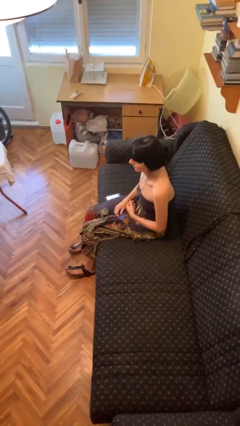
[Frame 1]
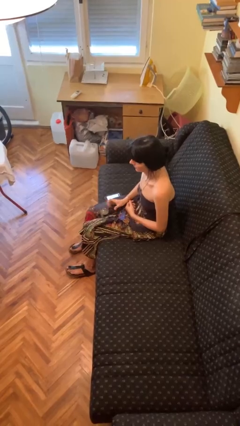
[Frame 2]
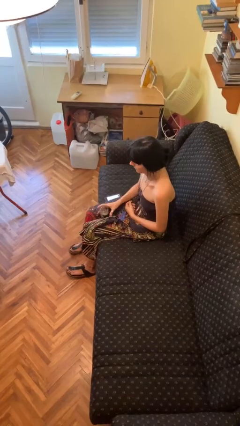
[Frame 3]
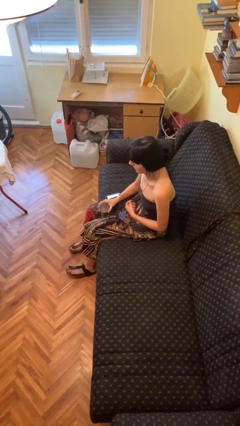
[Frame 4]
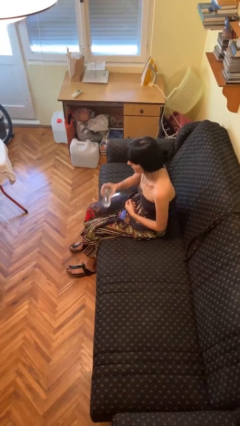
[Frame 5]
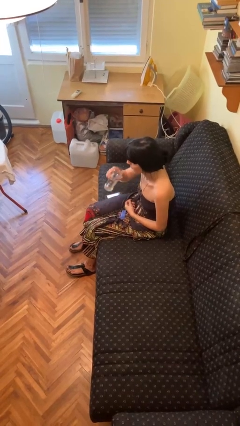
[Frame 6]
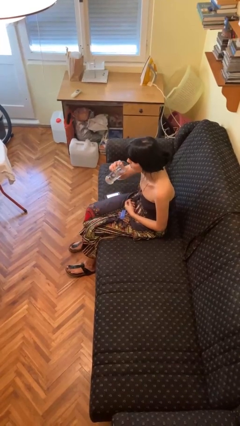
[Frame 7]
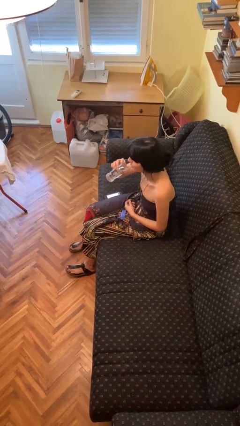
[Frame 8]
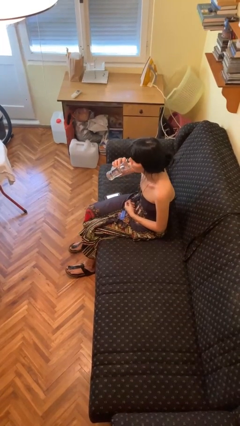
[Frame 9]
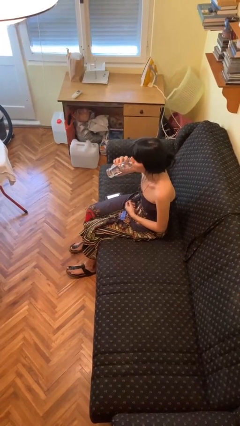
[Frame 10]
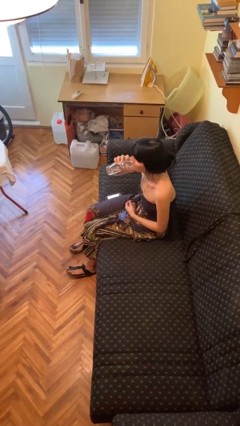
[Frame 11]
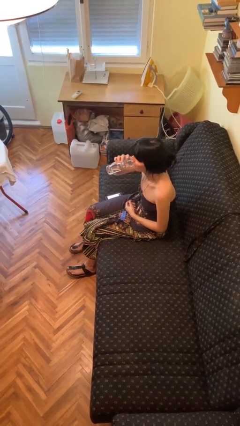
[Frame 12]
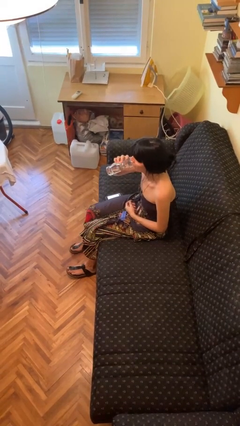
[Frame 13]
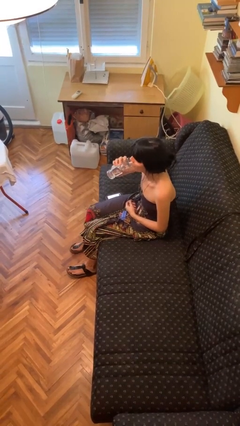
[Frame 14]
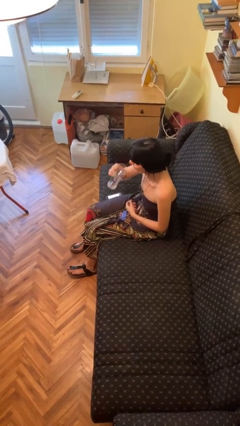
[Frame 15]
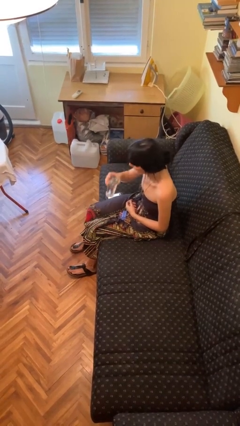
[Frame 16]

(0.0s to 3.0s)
person drinks from cup

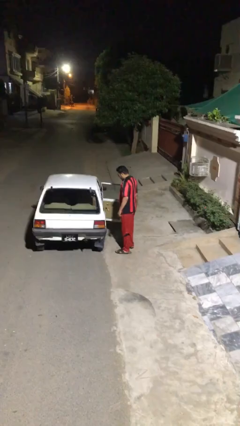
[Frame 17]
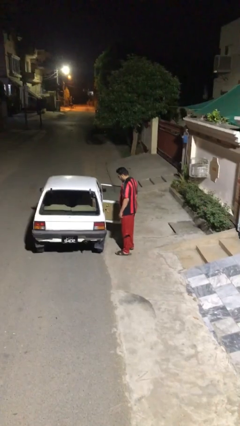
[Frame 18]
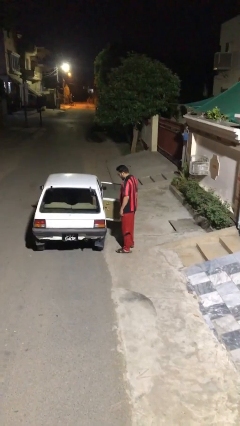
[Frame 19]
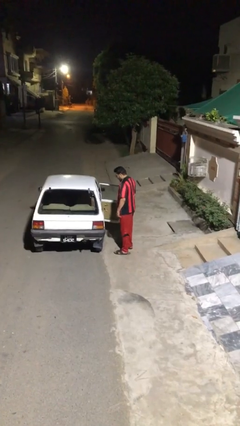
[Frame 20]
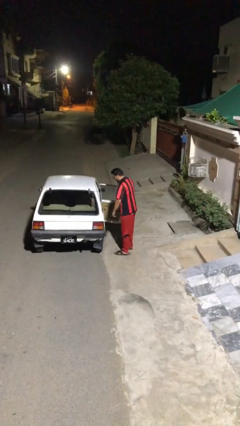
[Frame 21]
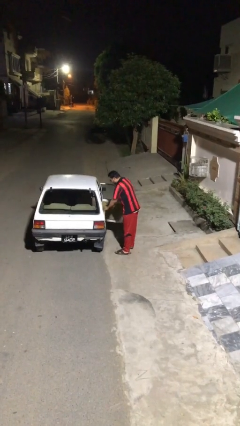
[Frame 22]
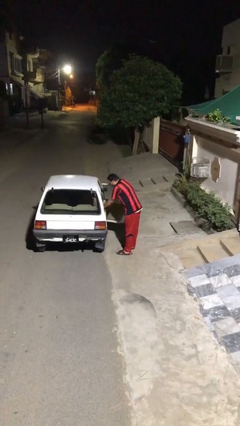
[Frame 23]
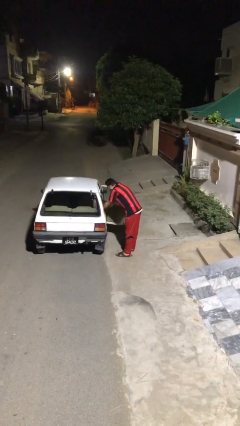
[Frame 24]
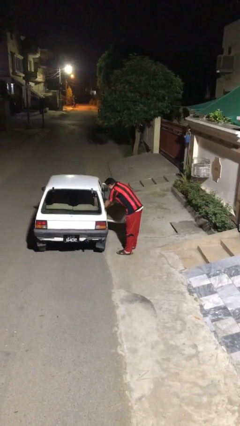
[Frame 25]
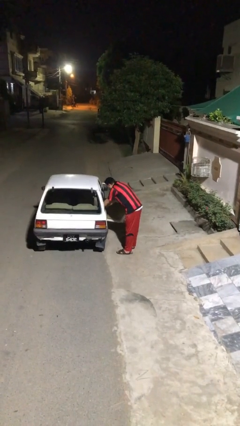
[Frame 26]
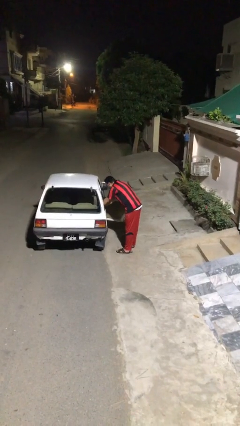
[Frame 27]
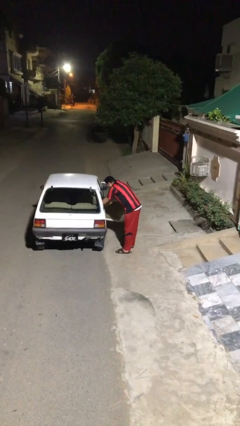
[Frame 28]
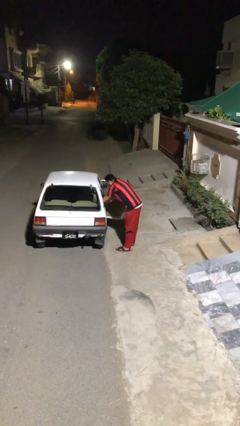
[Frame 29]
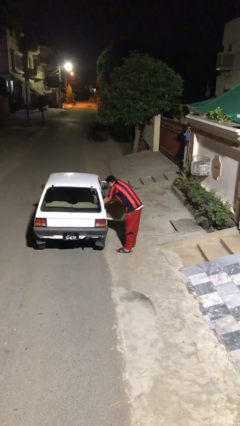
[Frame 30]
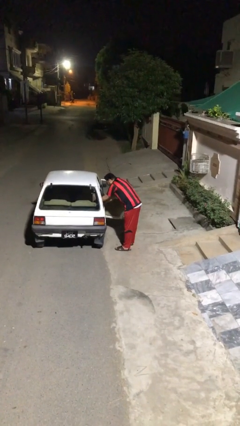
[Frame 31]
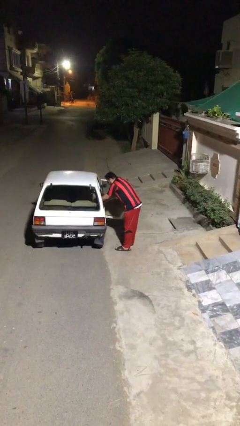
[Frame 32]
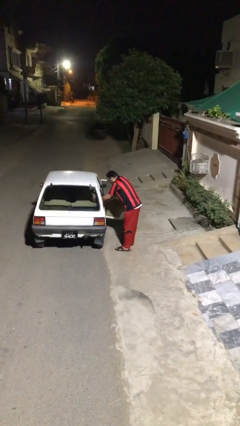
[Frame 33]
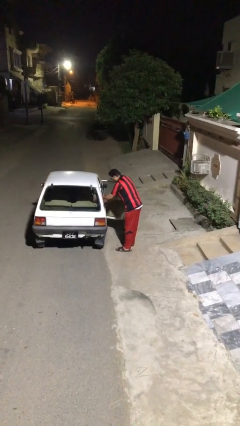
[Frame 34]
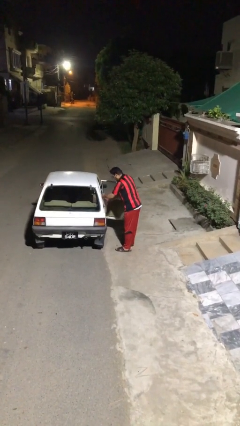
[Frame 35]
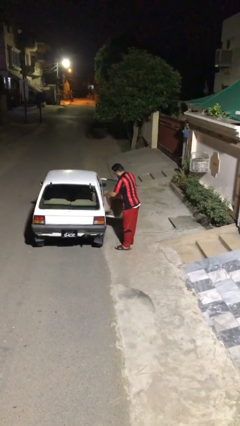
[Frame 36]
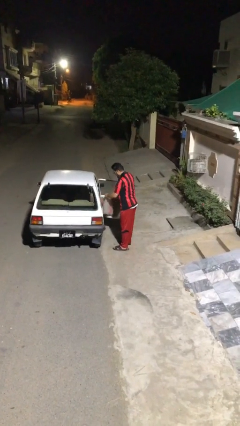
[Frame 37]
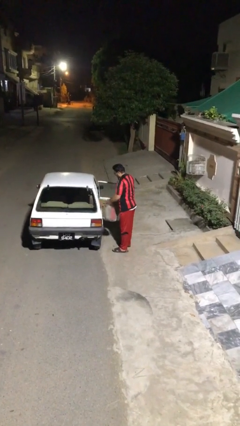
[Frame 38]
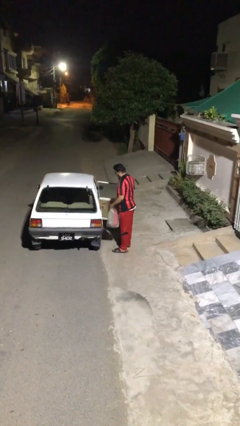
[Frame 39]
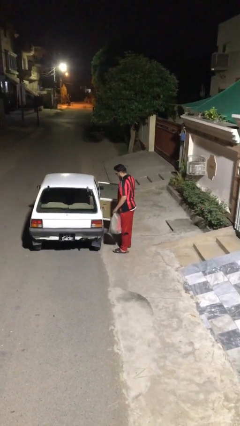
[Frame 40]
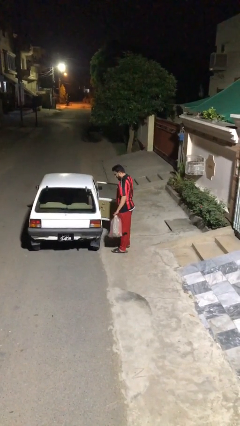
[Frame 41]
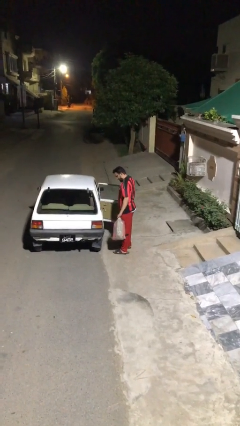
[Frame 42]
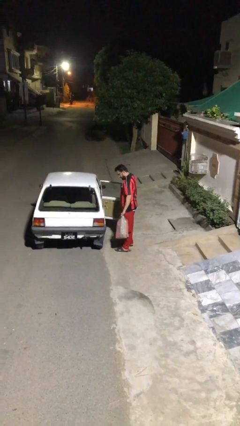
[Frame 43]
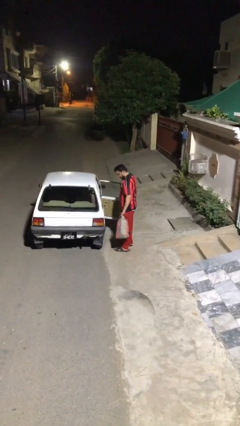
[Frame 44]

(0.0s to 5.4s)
person unloads car

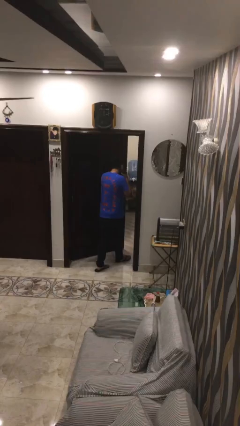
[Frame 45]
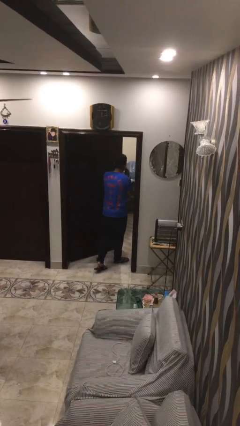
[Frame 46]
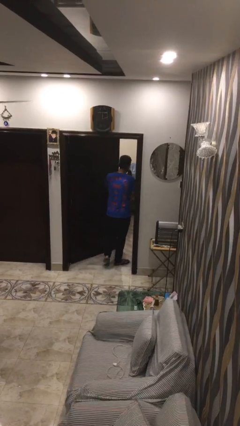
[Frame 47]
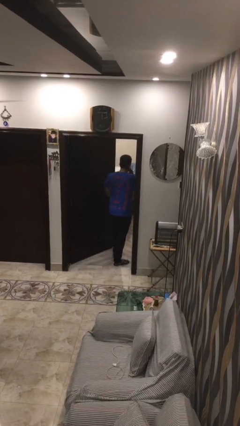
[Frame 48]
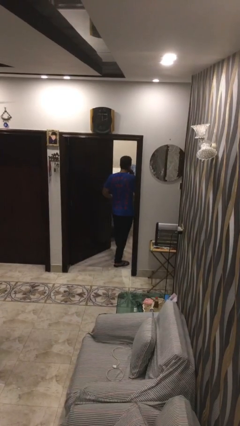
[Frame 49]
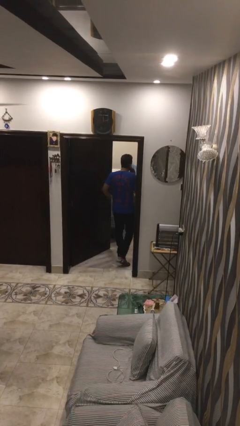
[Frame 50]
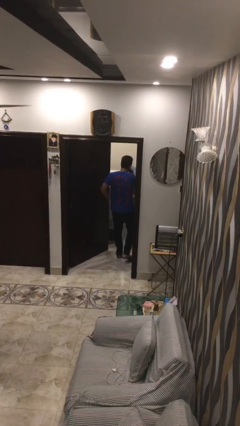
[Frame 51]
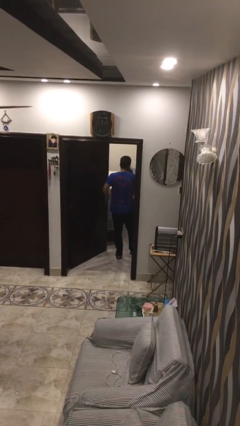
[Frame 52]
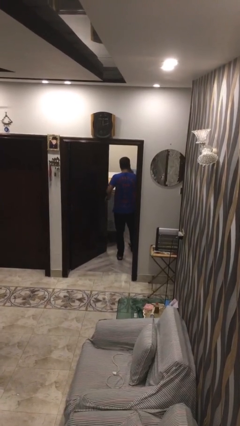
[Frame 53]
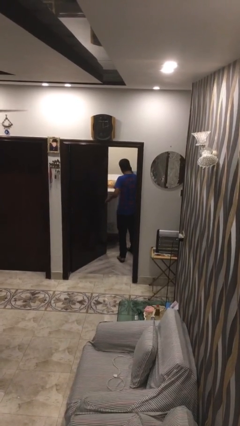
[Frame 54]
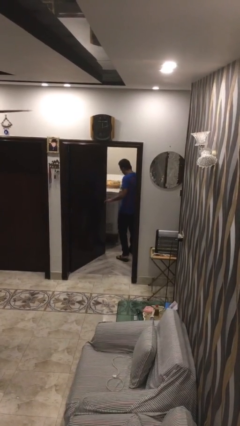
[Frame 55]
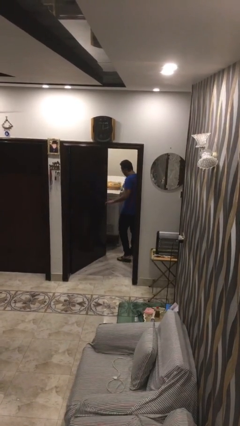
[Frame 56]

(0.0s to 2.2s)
person exits scene through structure

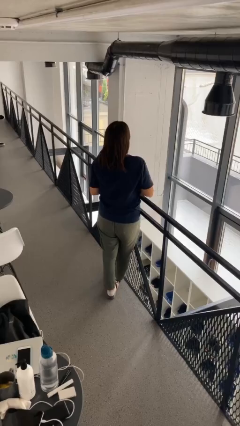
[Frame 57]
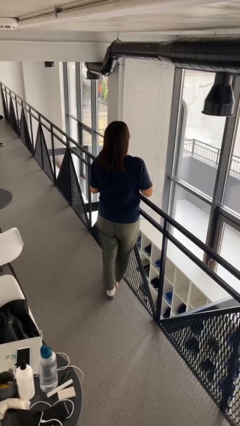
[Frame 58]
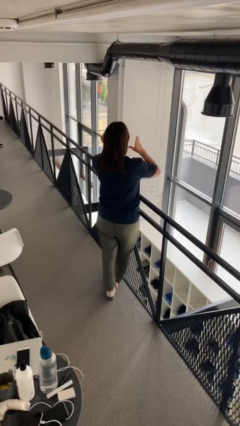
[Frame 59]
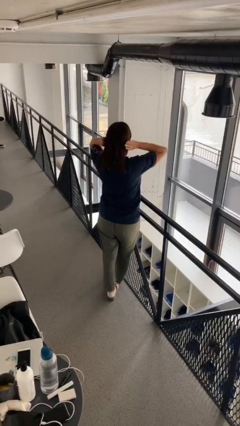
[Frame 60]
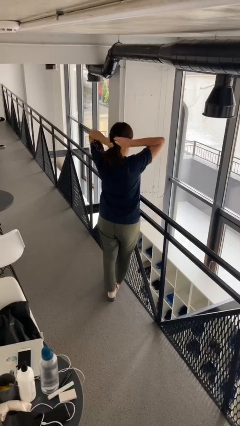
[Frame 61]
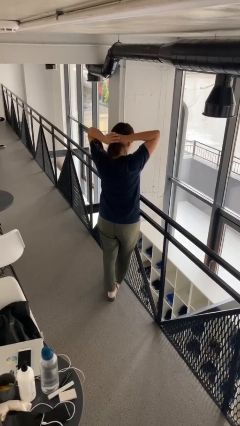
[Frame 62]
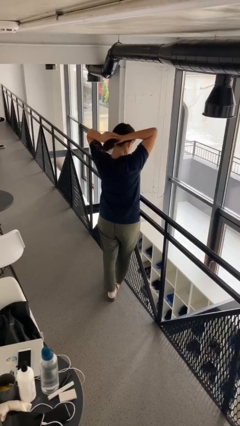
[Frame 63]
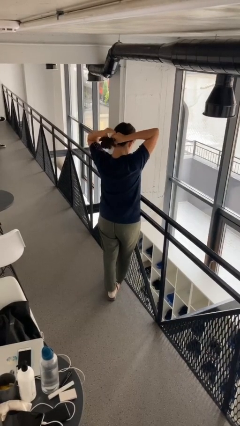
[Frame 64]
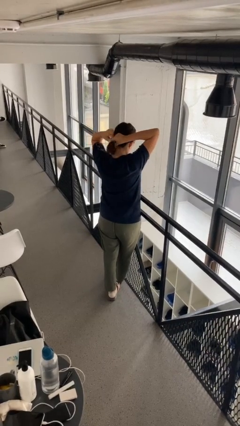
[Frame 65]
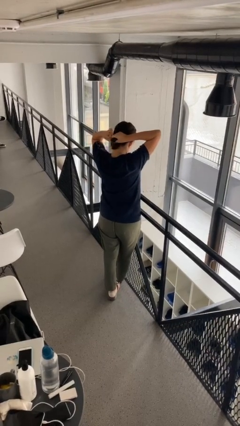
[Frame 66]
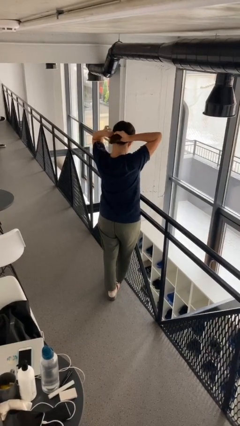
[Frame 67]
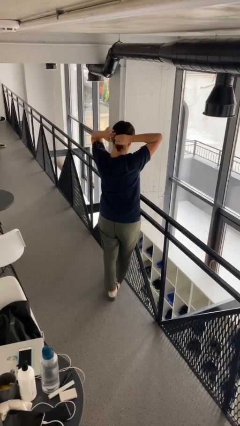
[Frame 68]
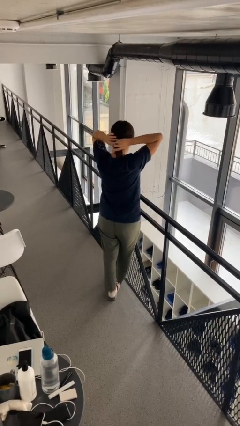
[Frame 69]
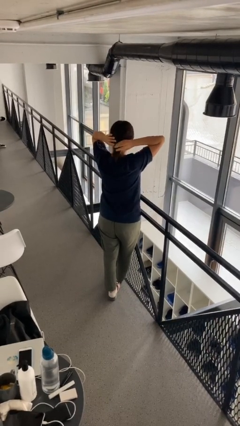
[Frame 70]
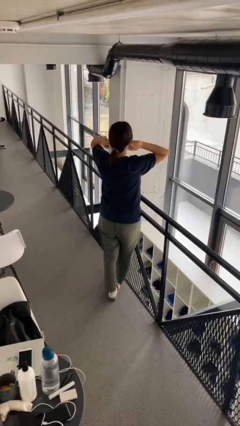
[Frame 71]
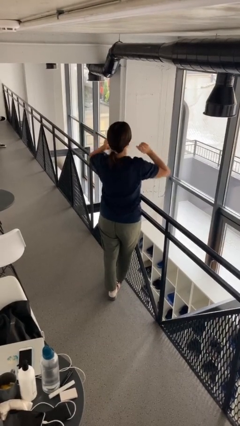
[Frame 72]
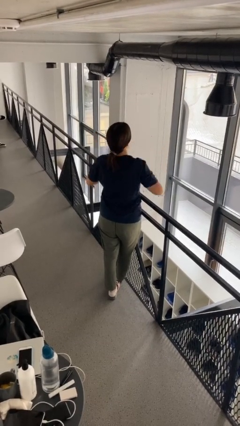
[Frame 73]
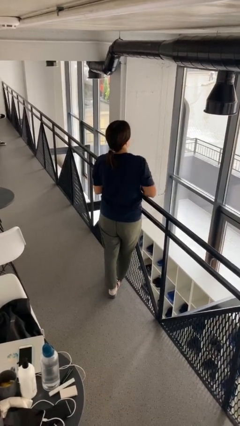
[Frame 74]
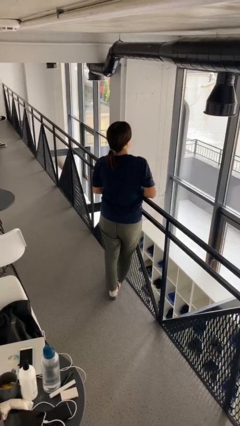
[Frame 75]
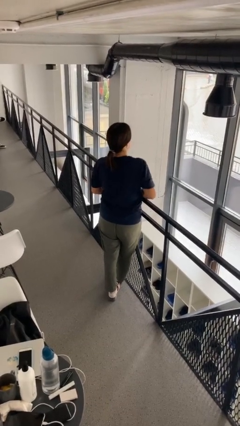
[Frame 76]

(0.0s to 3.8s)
person puts hair in ponytail

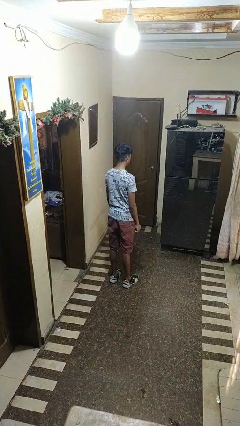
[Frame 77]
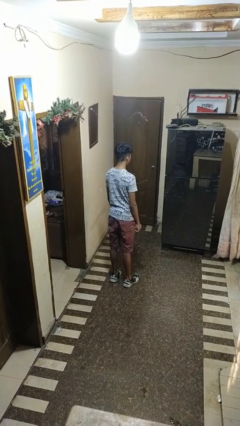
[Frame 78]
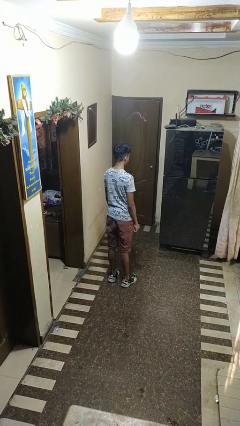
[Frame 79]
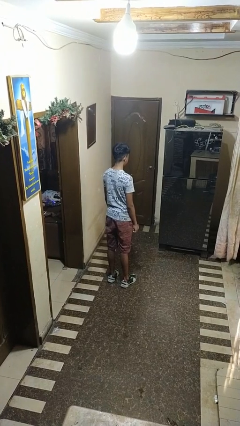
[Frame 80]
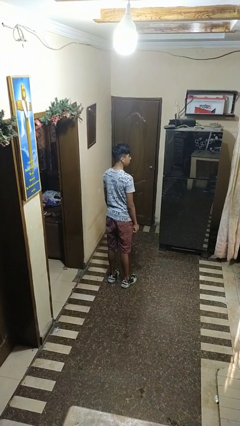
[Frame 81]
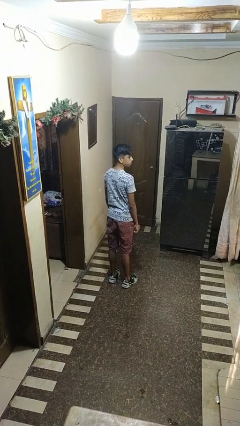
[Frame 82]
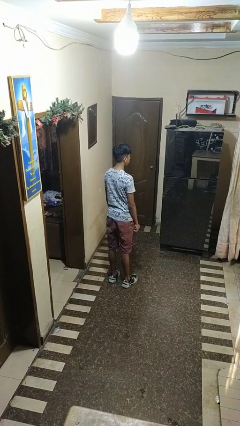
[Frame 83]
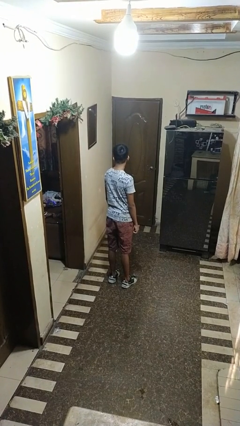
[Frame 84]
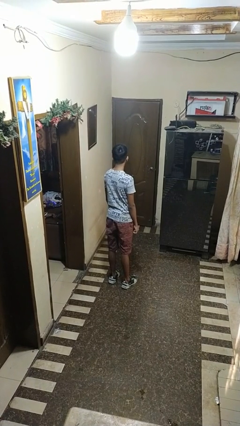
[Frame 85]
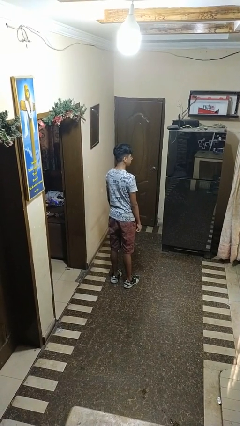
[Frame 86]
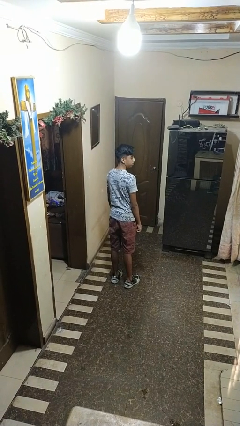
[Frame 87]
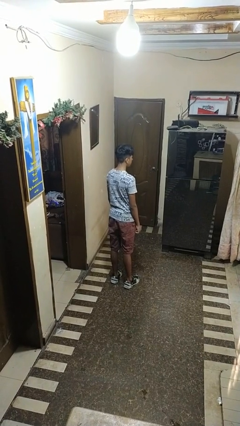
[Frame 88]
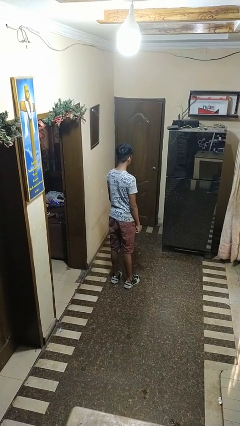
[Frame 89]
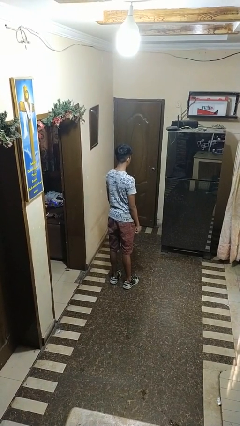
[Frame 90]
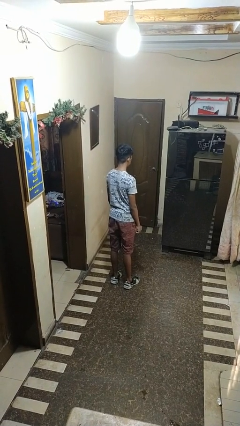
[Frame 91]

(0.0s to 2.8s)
person nods head

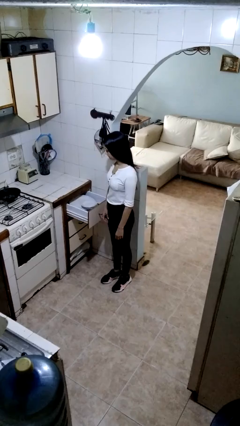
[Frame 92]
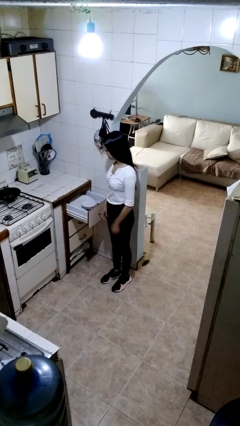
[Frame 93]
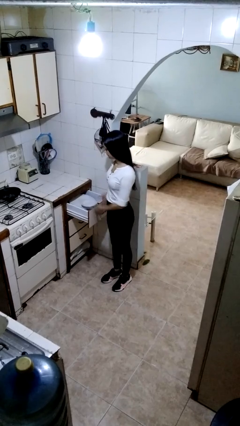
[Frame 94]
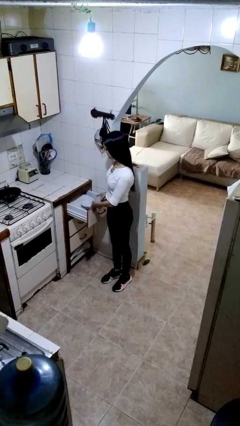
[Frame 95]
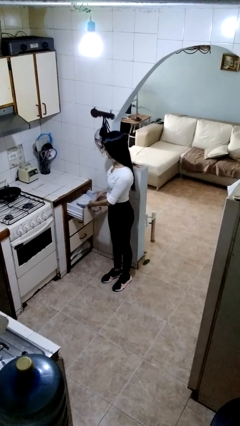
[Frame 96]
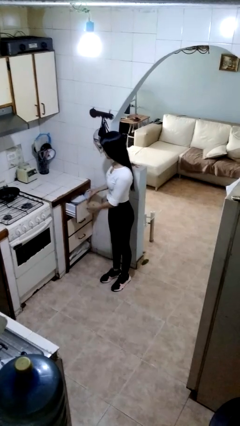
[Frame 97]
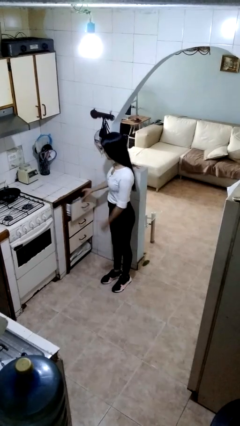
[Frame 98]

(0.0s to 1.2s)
person closes kitchen drawer
